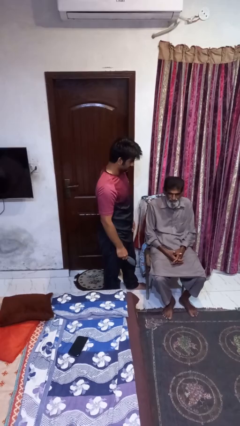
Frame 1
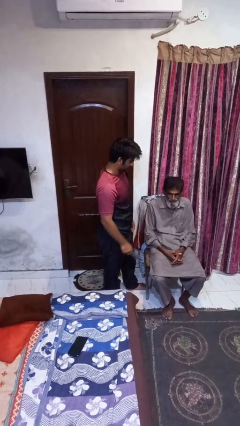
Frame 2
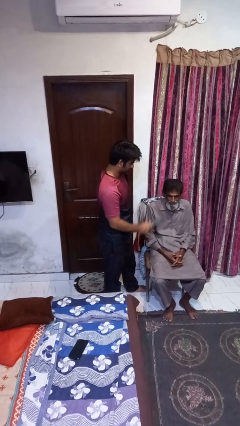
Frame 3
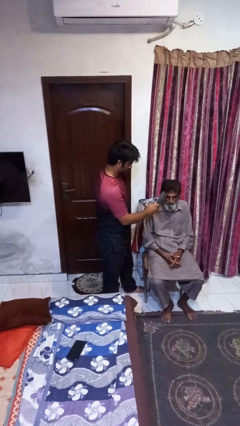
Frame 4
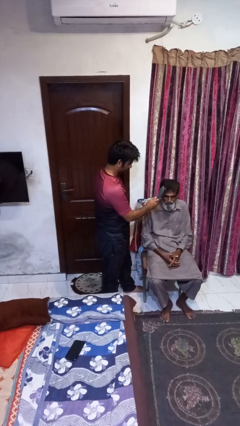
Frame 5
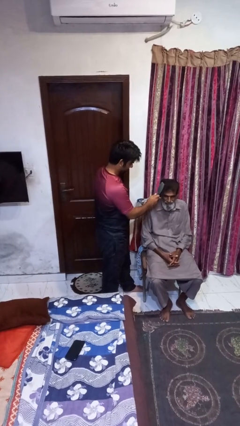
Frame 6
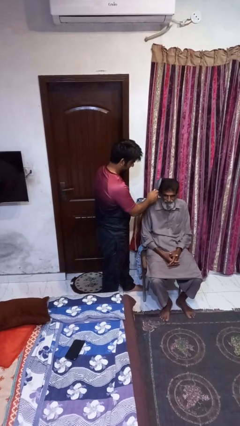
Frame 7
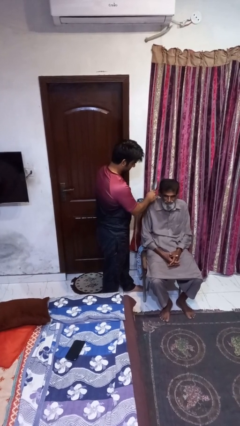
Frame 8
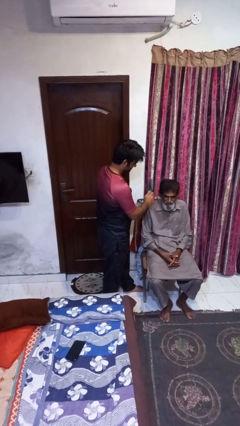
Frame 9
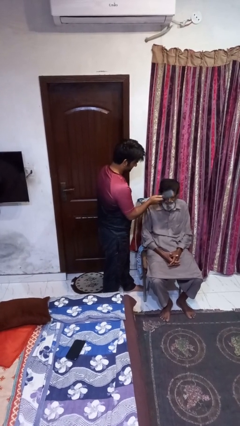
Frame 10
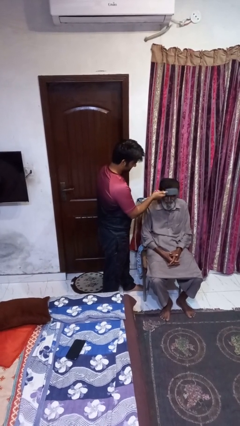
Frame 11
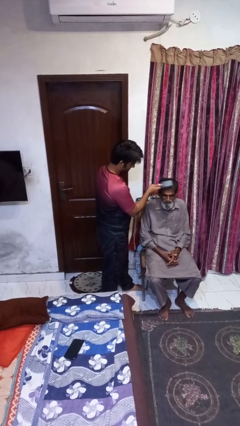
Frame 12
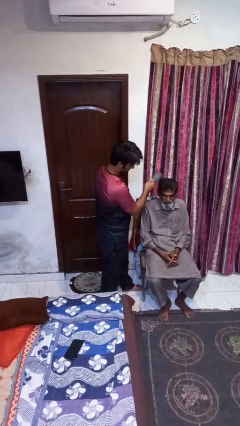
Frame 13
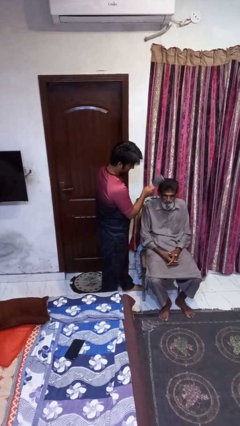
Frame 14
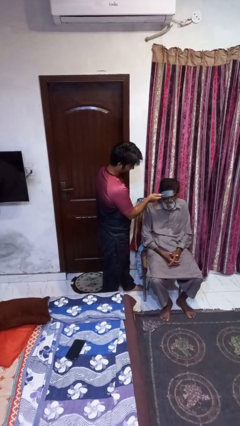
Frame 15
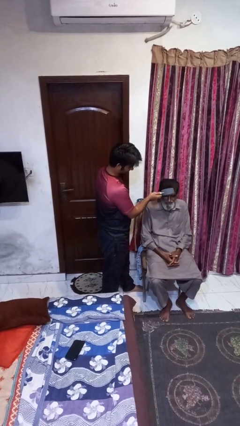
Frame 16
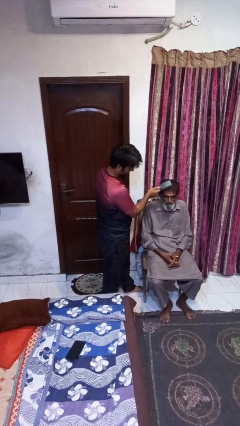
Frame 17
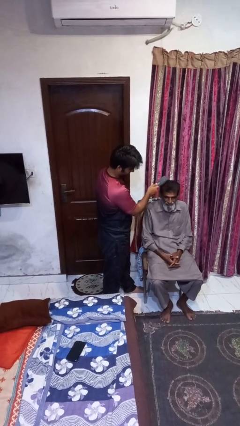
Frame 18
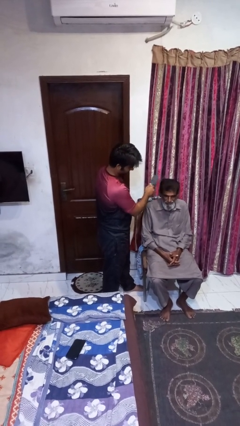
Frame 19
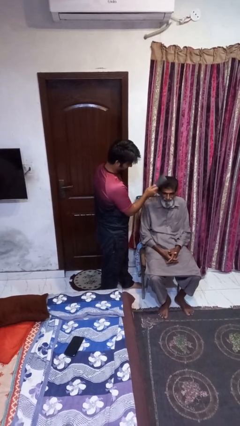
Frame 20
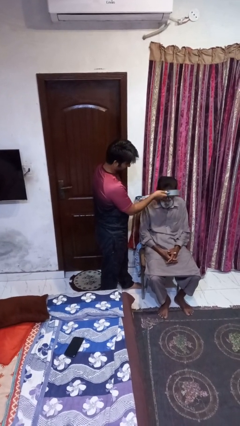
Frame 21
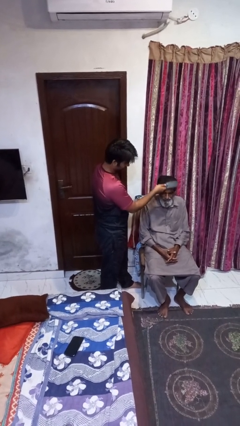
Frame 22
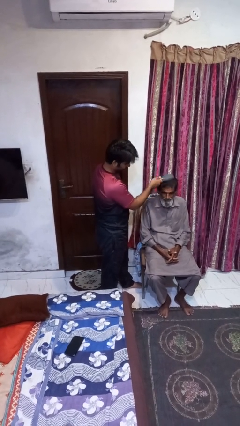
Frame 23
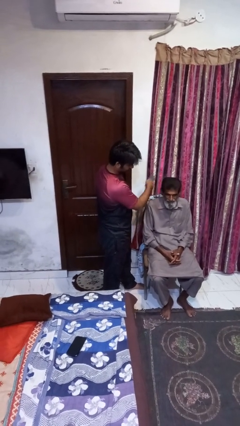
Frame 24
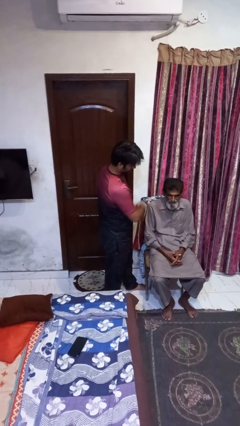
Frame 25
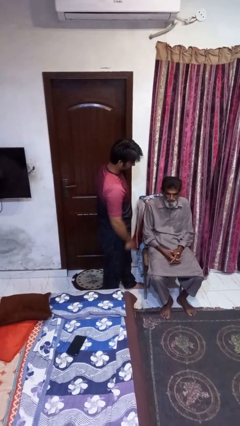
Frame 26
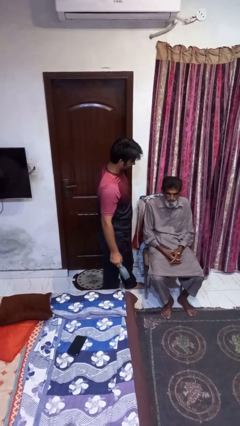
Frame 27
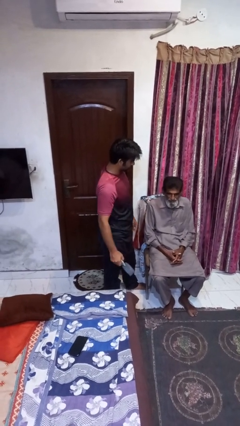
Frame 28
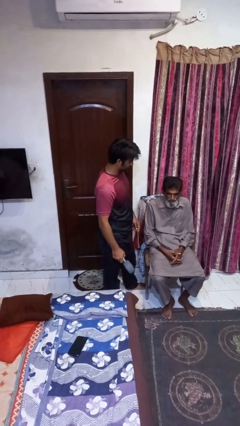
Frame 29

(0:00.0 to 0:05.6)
person brushes hair of person

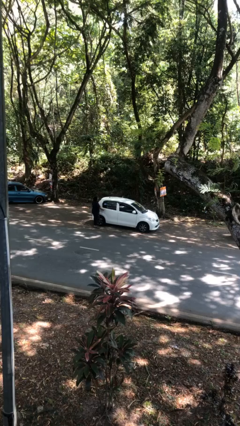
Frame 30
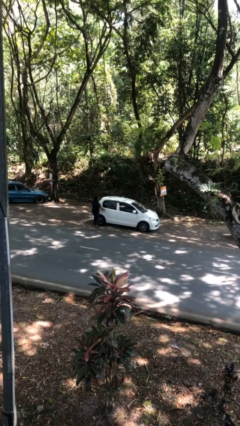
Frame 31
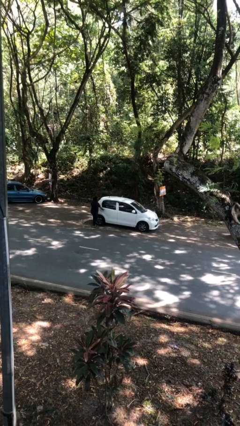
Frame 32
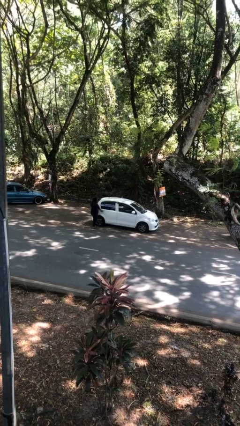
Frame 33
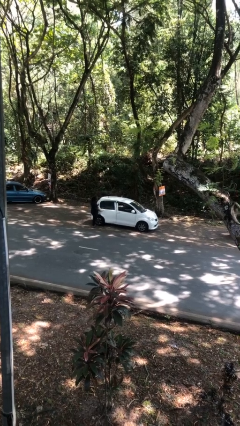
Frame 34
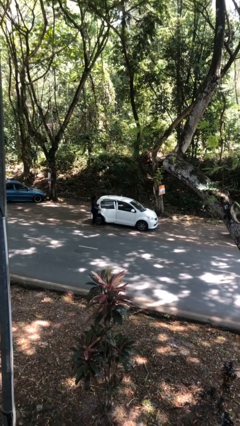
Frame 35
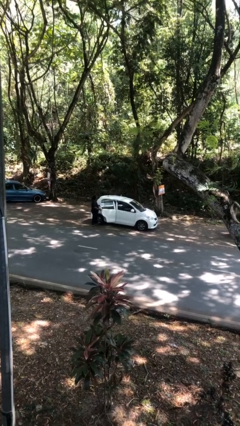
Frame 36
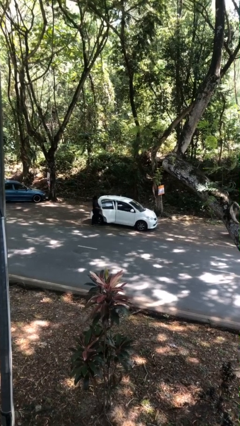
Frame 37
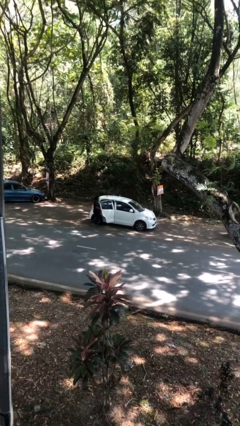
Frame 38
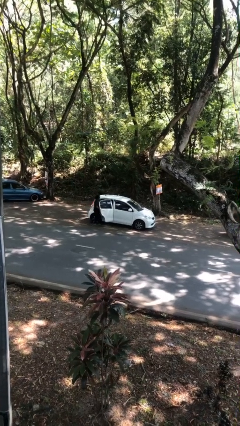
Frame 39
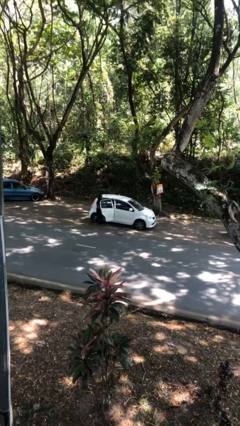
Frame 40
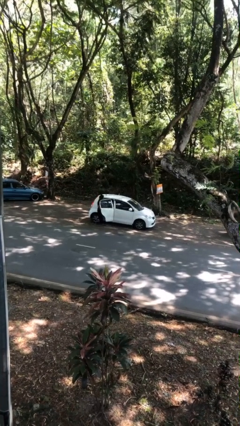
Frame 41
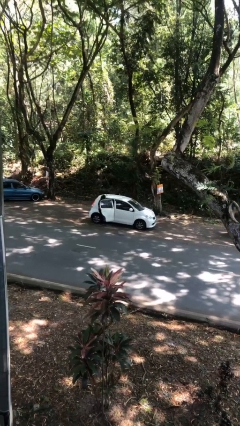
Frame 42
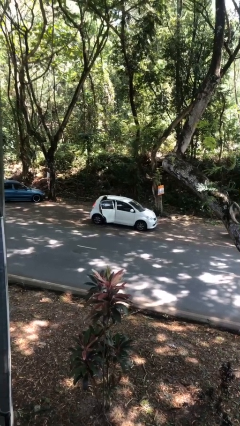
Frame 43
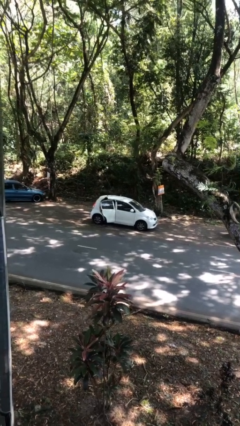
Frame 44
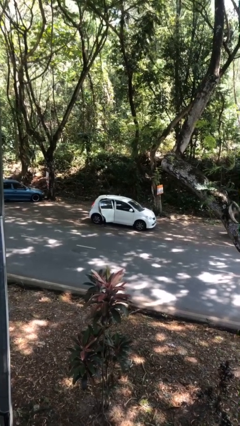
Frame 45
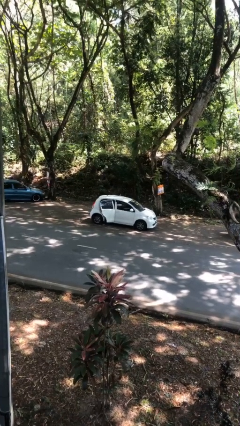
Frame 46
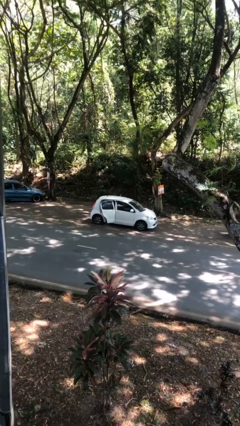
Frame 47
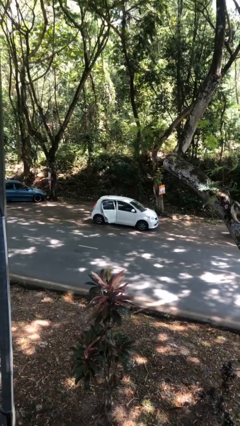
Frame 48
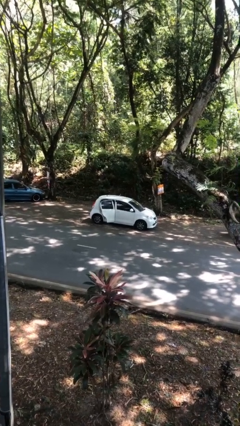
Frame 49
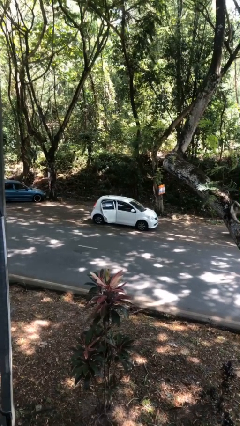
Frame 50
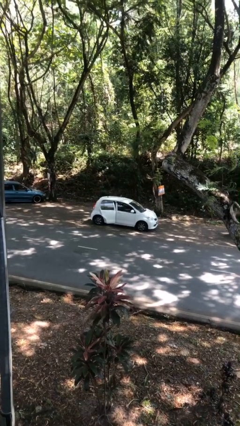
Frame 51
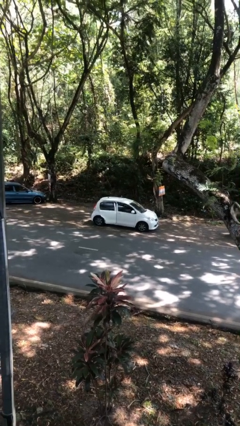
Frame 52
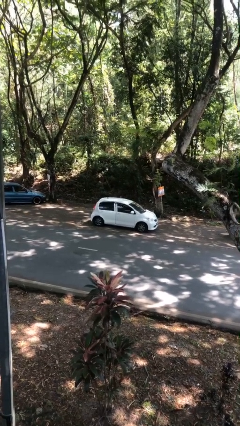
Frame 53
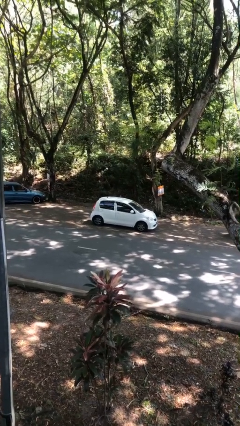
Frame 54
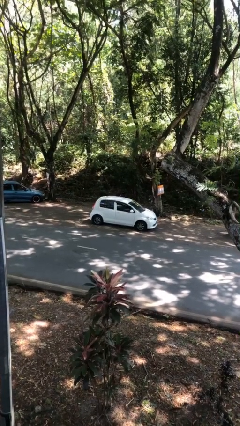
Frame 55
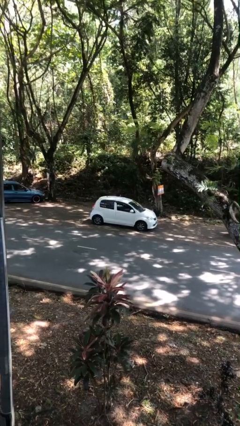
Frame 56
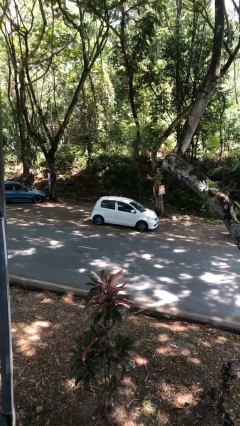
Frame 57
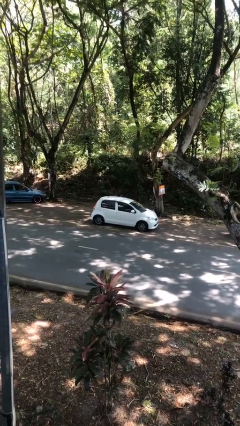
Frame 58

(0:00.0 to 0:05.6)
car picks up person

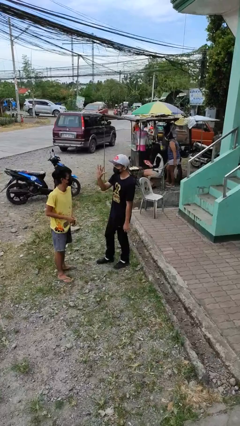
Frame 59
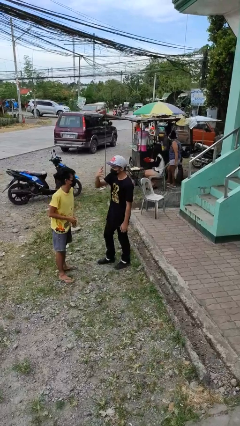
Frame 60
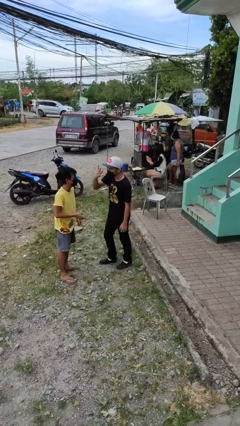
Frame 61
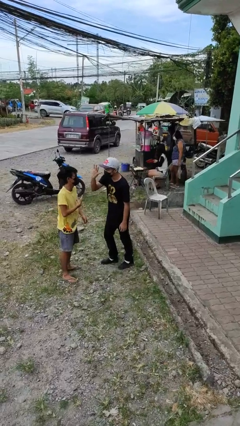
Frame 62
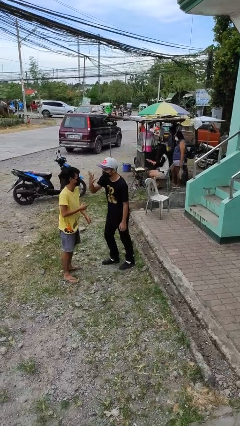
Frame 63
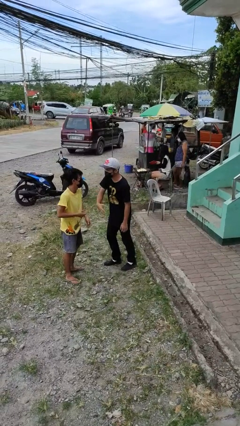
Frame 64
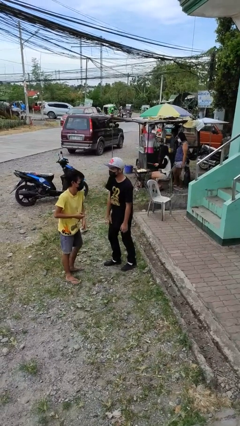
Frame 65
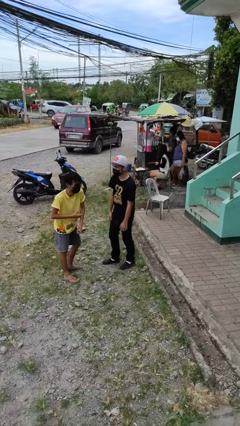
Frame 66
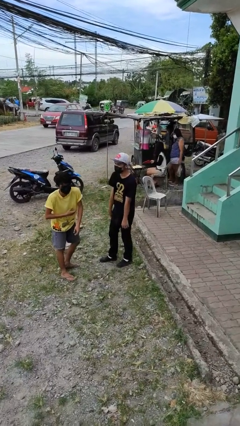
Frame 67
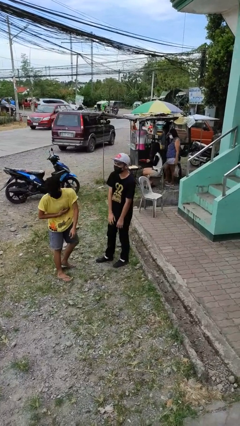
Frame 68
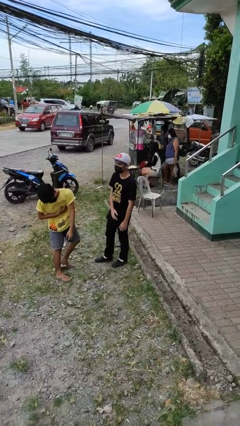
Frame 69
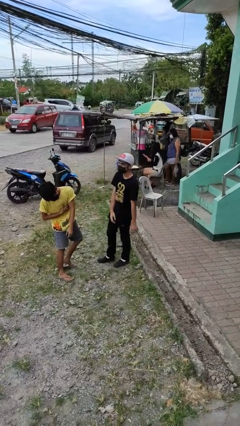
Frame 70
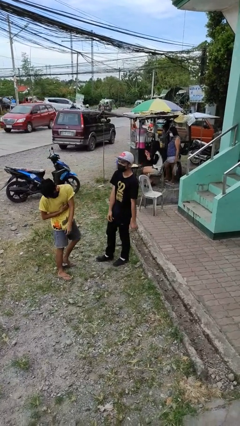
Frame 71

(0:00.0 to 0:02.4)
person talks to person

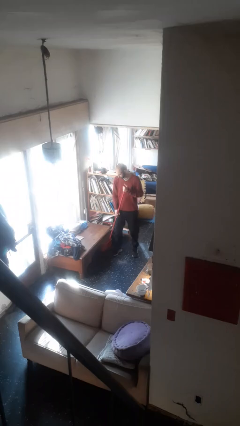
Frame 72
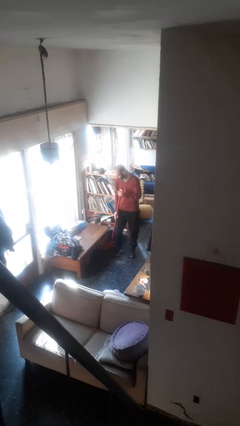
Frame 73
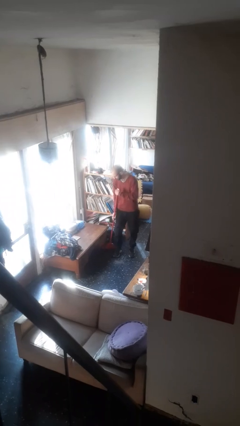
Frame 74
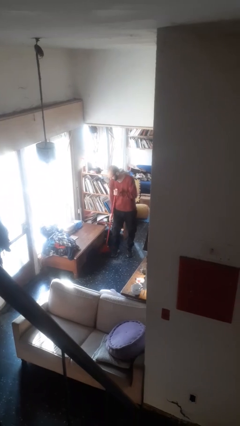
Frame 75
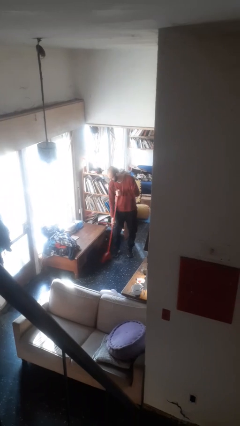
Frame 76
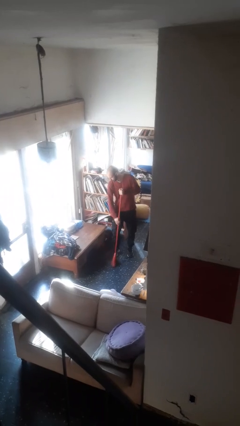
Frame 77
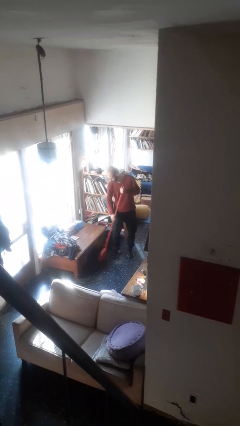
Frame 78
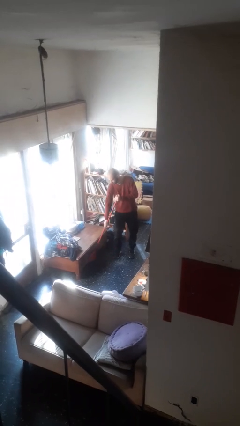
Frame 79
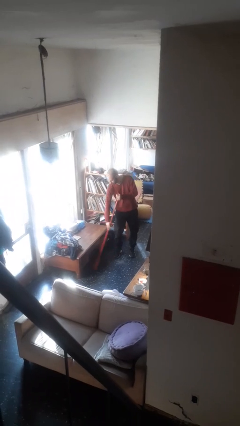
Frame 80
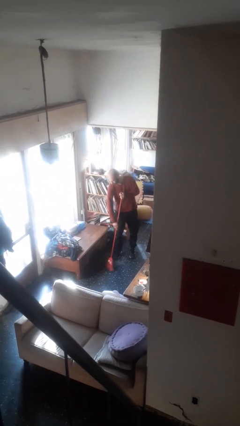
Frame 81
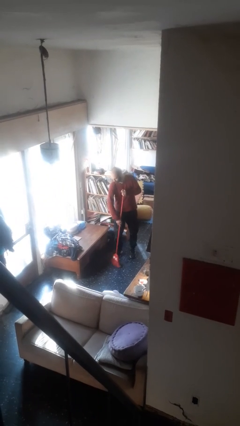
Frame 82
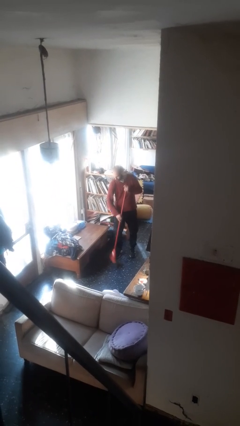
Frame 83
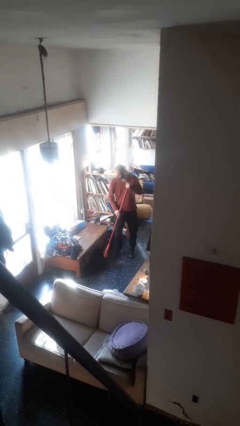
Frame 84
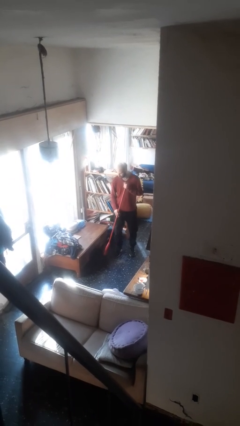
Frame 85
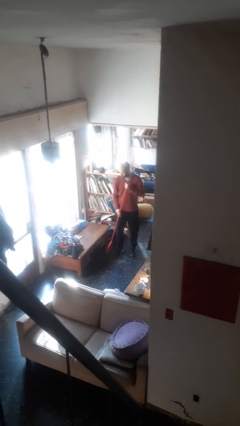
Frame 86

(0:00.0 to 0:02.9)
person sweeps floor

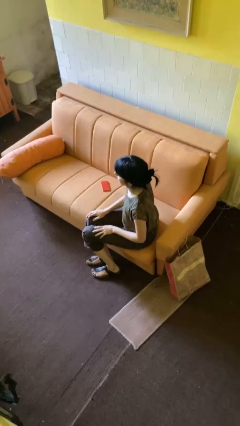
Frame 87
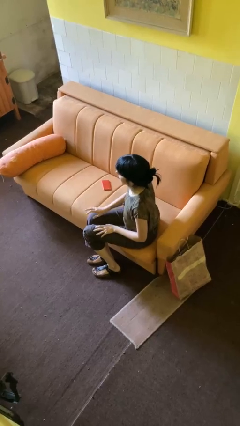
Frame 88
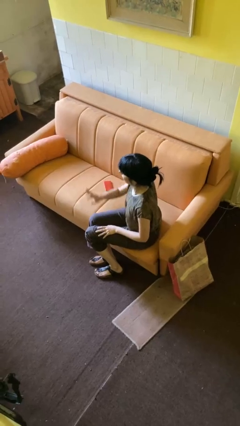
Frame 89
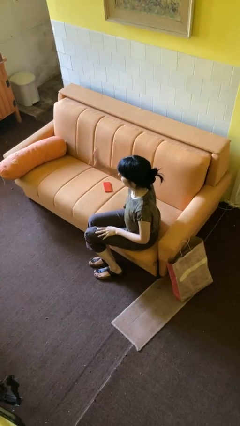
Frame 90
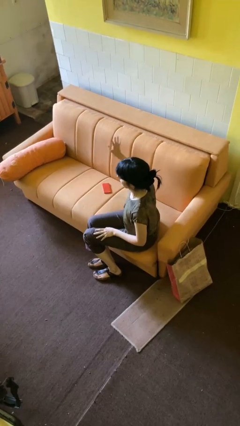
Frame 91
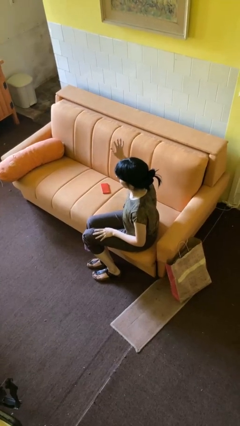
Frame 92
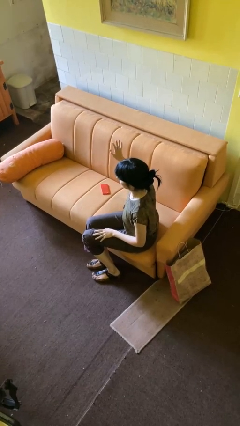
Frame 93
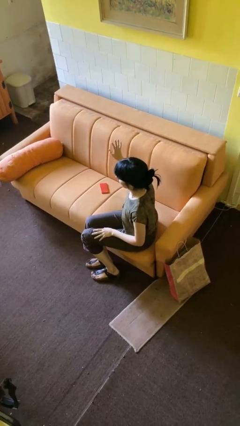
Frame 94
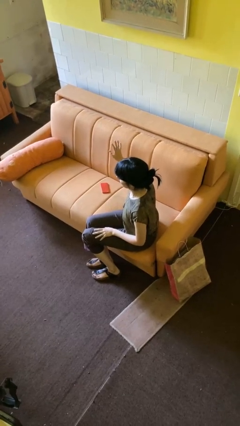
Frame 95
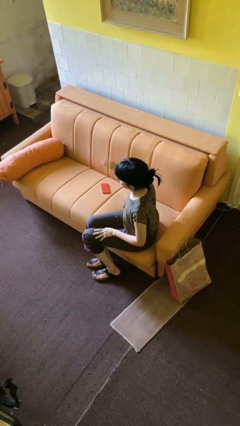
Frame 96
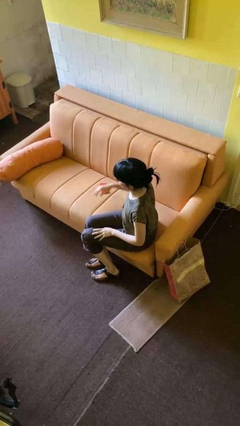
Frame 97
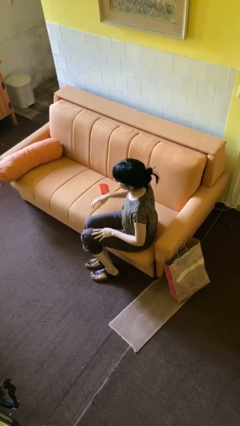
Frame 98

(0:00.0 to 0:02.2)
person gestures swipe right
